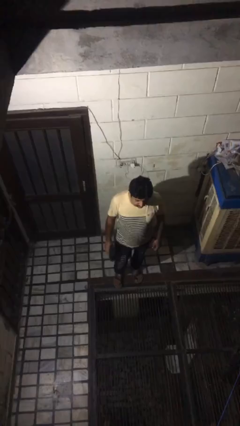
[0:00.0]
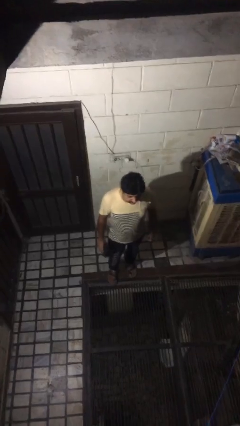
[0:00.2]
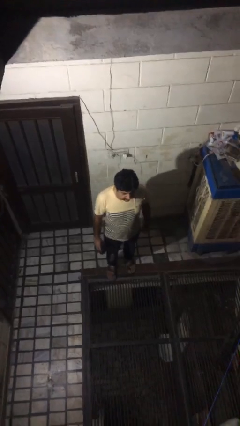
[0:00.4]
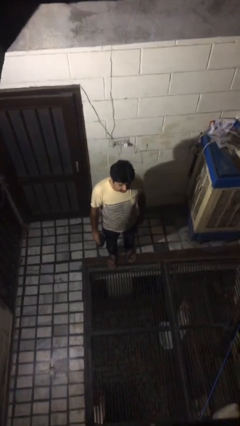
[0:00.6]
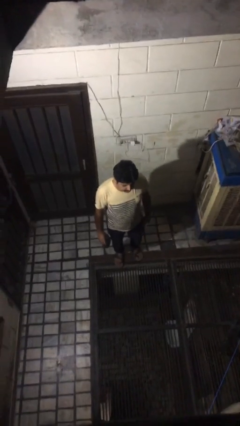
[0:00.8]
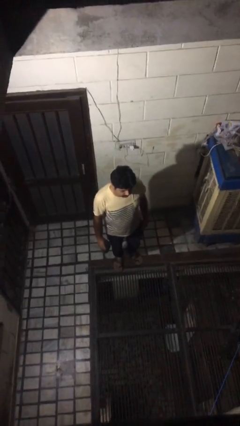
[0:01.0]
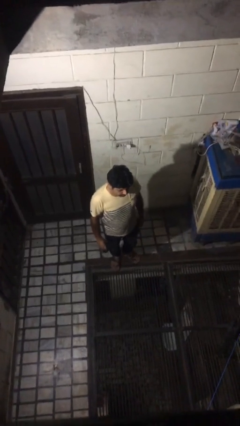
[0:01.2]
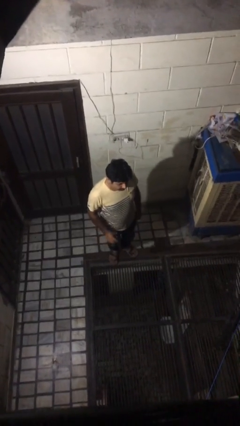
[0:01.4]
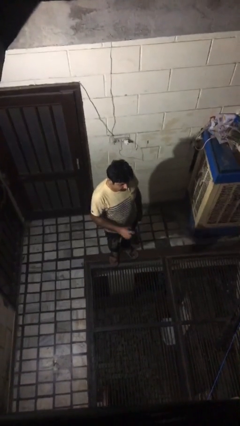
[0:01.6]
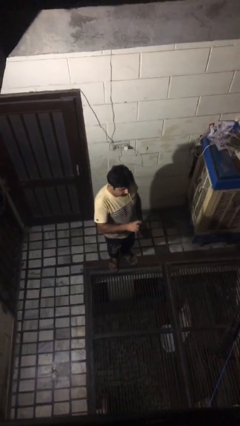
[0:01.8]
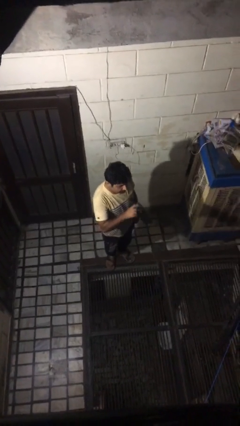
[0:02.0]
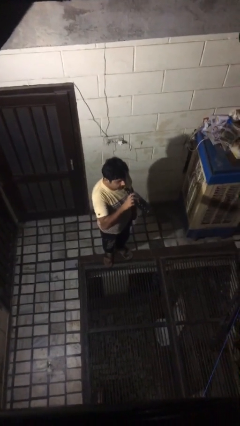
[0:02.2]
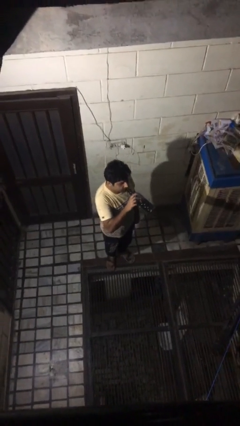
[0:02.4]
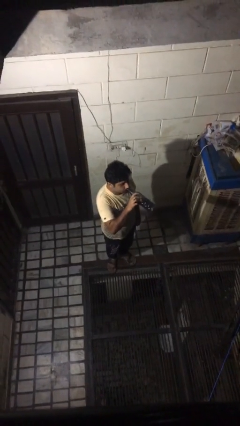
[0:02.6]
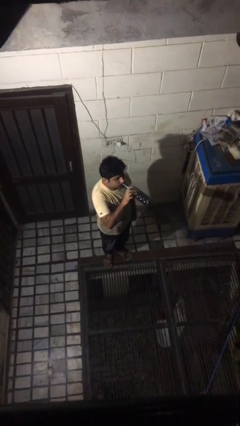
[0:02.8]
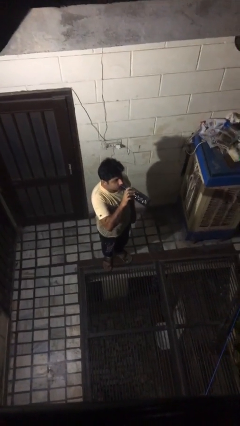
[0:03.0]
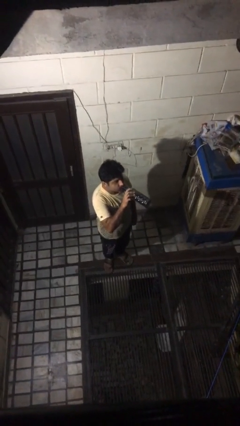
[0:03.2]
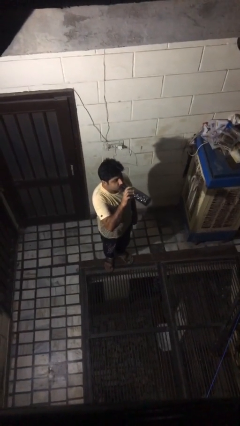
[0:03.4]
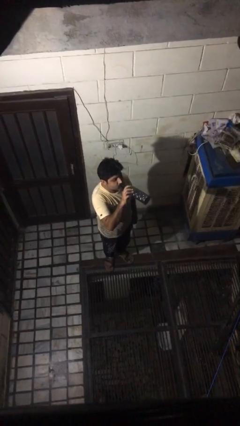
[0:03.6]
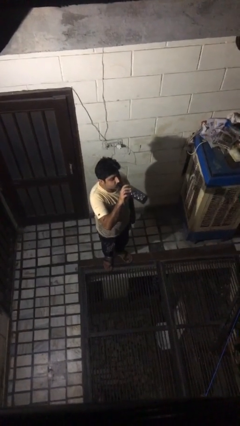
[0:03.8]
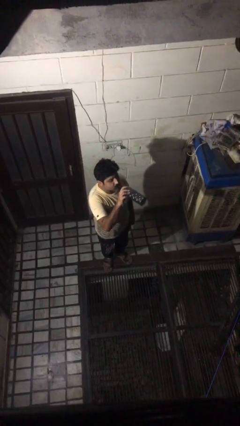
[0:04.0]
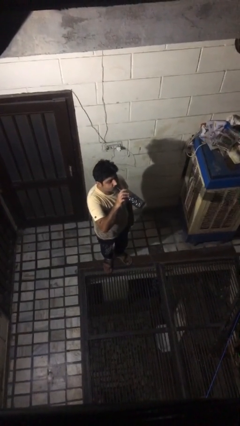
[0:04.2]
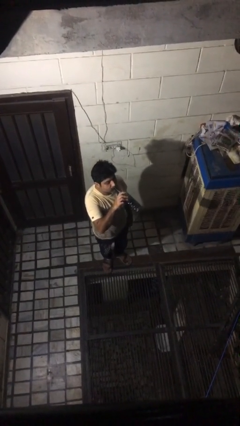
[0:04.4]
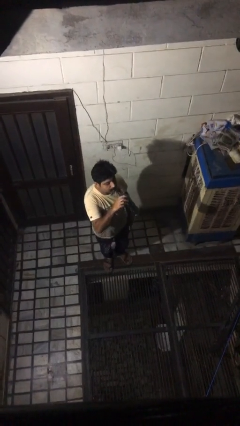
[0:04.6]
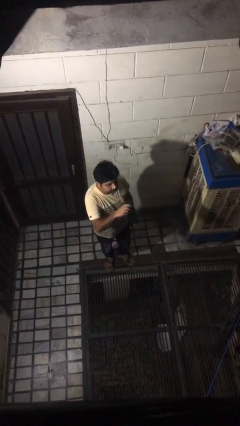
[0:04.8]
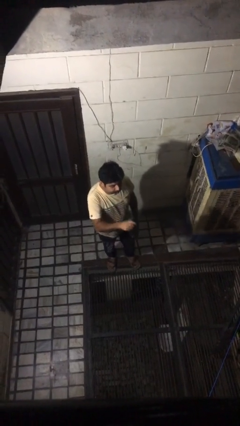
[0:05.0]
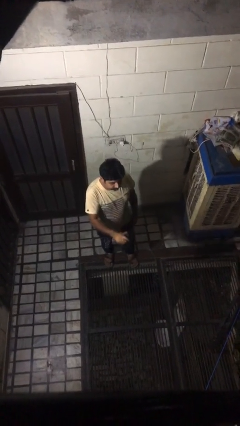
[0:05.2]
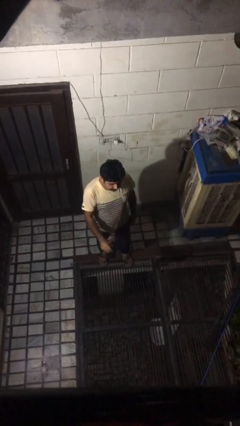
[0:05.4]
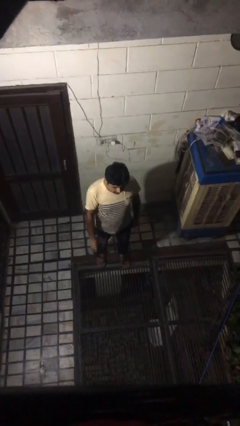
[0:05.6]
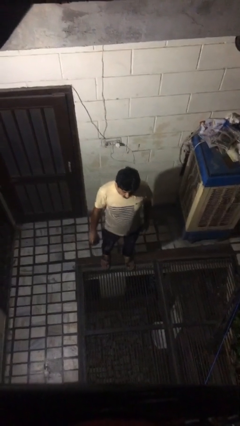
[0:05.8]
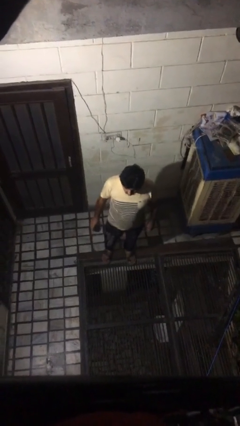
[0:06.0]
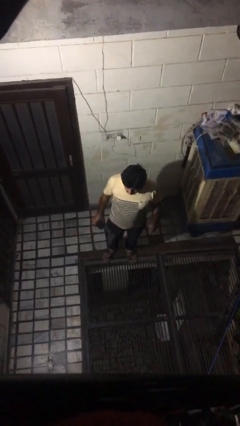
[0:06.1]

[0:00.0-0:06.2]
person drinks from bottle

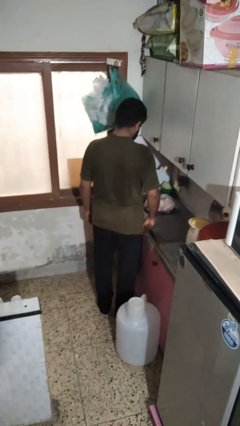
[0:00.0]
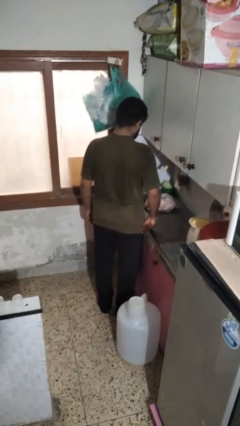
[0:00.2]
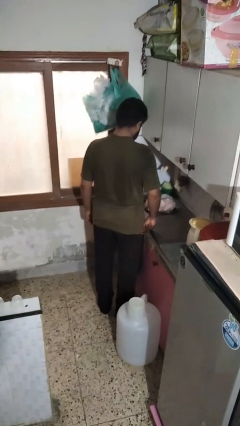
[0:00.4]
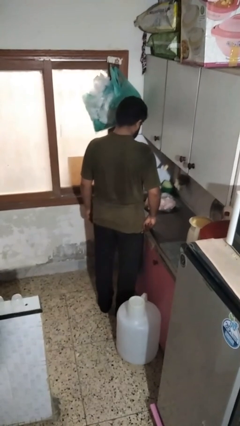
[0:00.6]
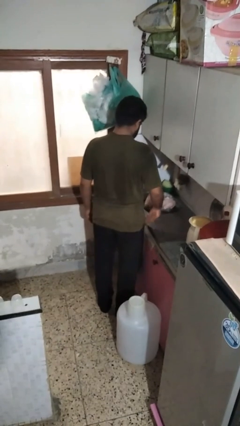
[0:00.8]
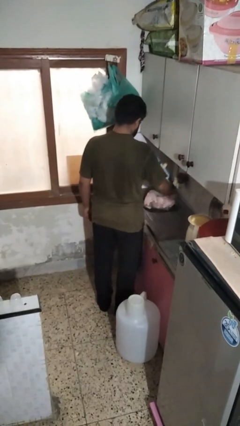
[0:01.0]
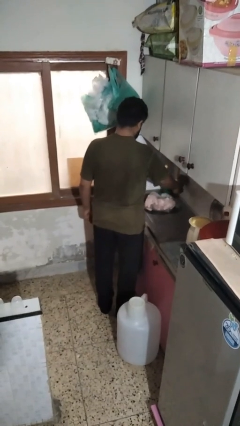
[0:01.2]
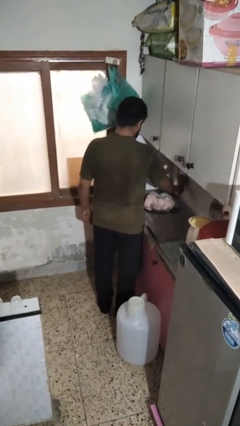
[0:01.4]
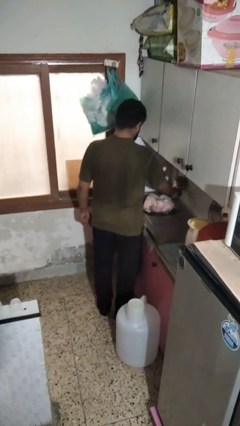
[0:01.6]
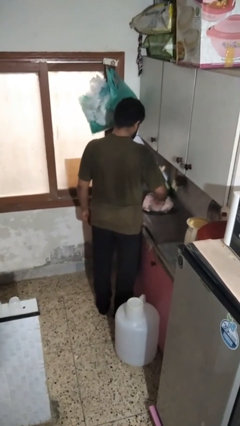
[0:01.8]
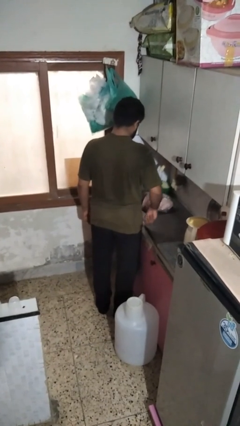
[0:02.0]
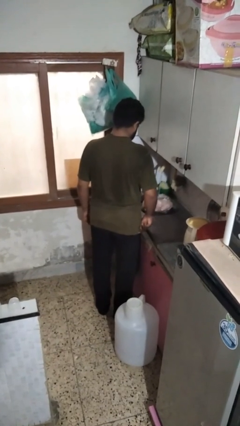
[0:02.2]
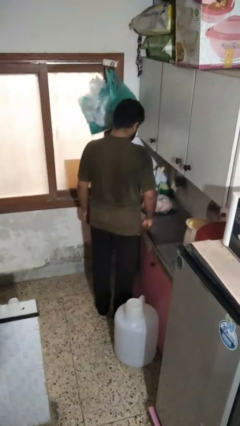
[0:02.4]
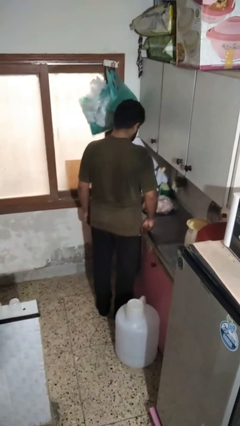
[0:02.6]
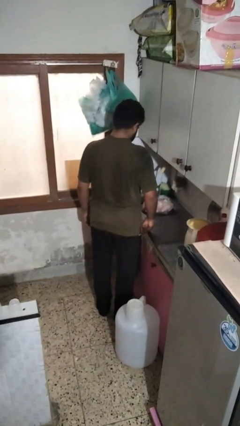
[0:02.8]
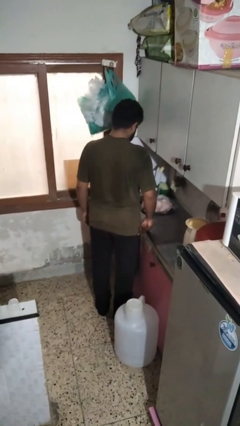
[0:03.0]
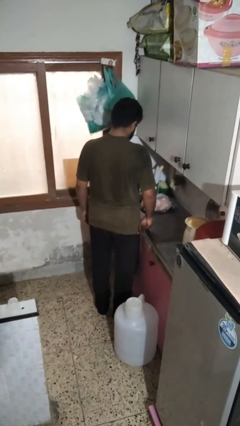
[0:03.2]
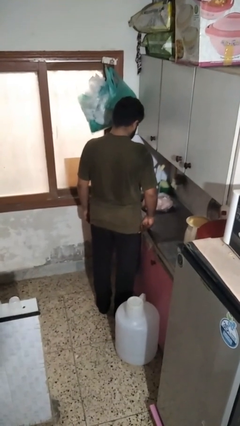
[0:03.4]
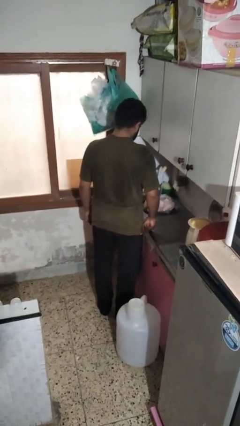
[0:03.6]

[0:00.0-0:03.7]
person turns on faucet

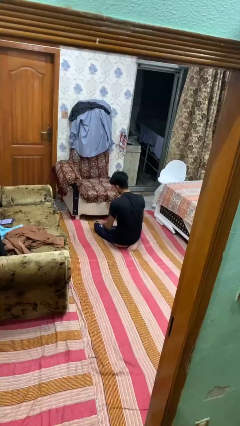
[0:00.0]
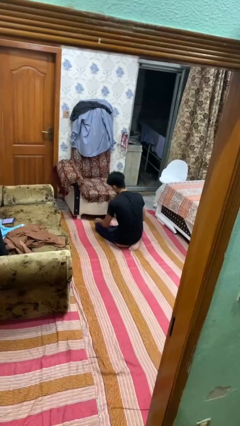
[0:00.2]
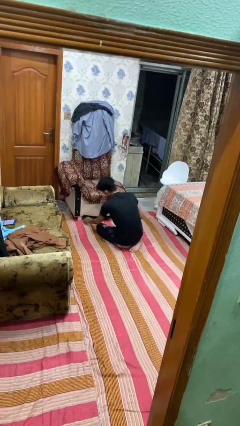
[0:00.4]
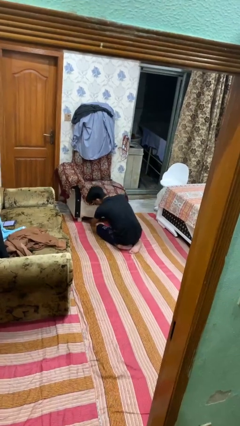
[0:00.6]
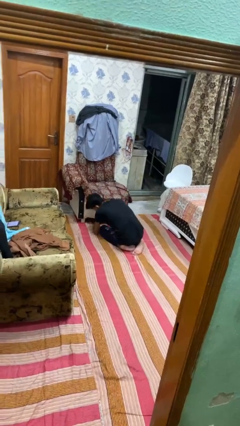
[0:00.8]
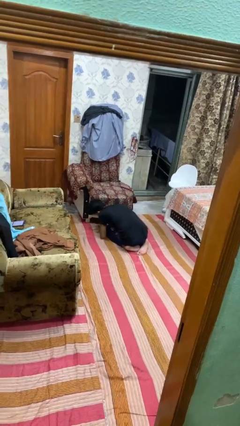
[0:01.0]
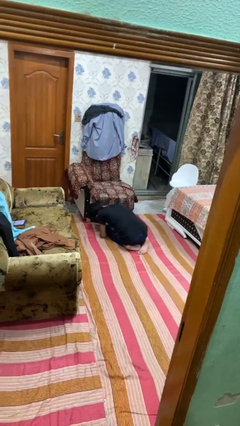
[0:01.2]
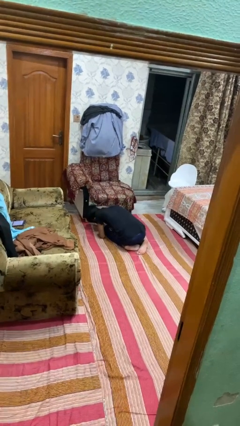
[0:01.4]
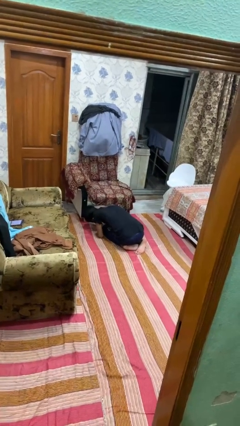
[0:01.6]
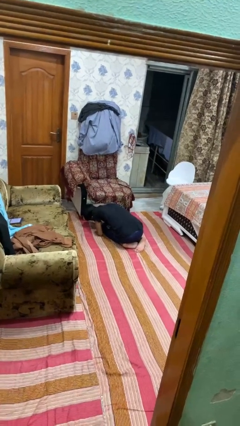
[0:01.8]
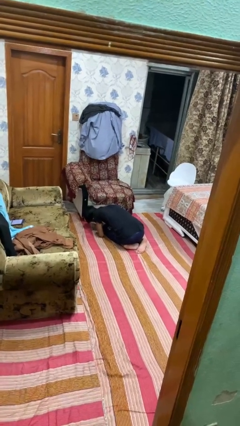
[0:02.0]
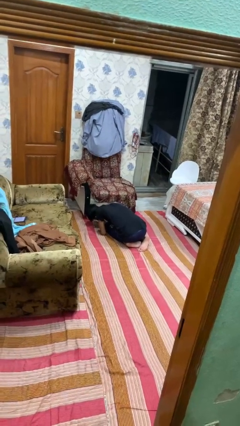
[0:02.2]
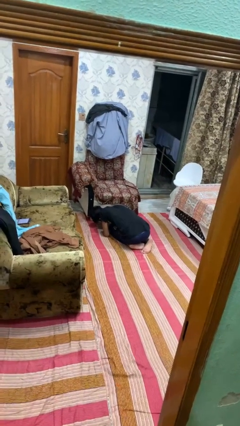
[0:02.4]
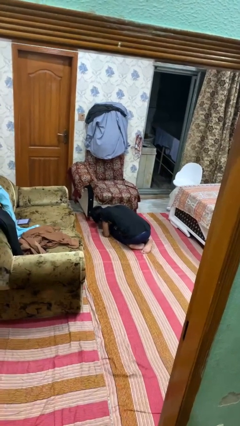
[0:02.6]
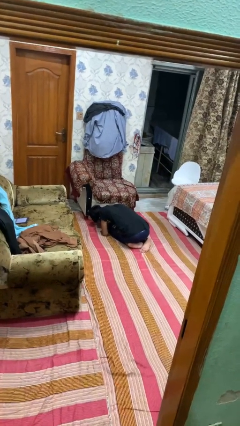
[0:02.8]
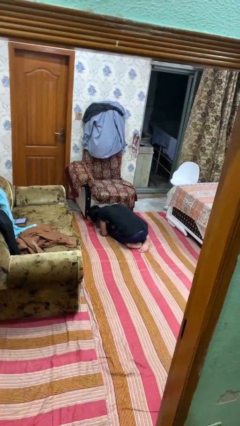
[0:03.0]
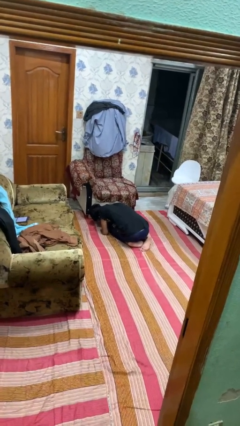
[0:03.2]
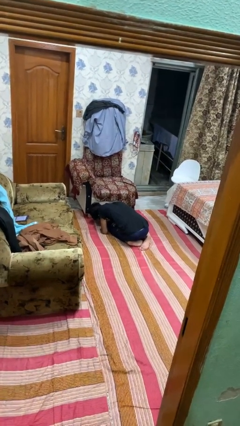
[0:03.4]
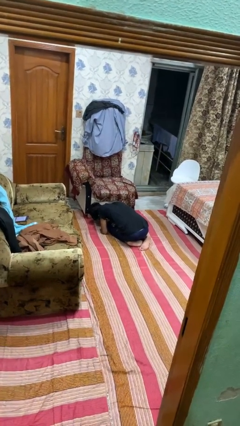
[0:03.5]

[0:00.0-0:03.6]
person searches under couch

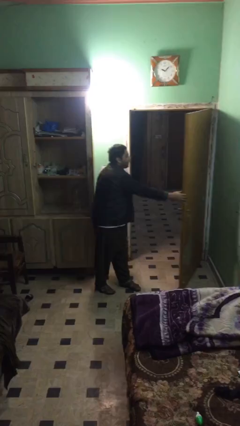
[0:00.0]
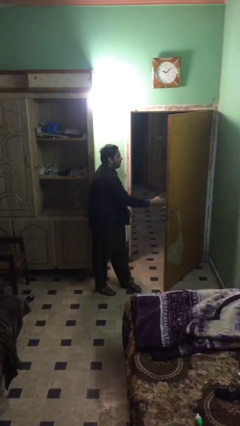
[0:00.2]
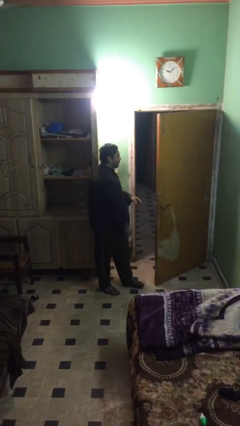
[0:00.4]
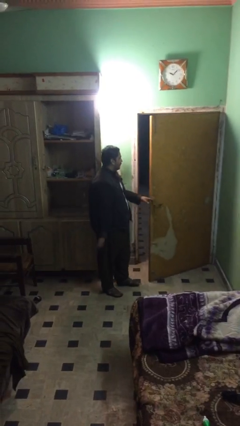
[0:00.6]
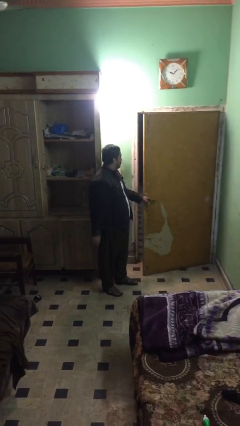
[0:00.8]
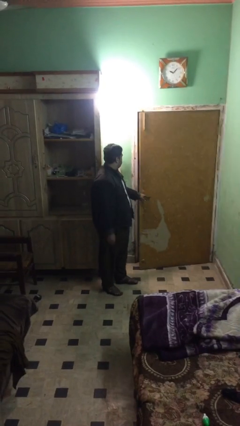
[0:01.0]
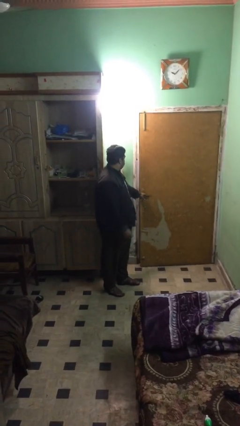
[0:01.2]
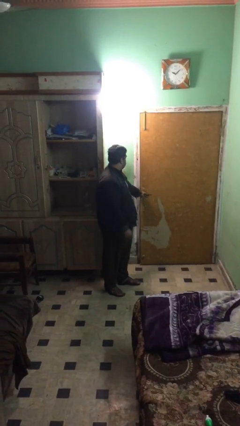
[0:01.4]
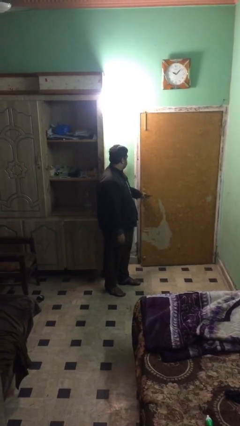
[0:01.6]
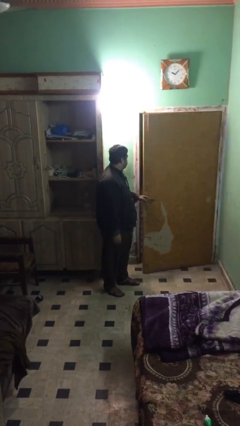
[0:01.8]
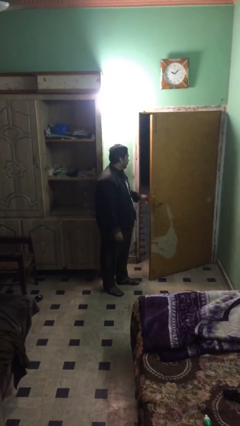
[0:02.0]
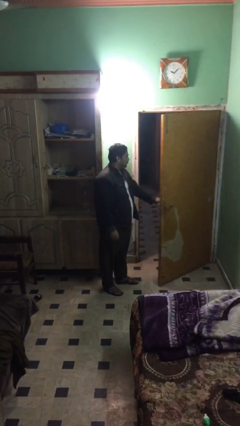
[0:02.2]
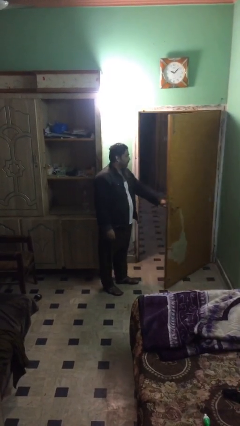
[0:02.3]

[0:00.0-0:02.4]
person opens facility door

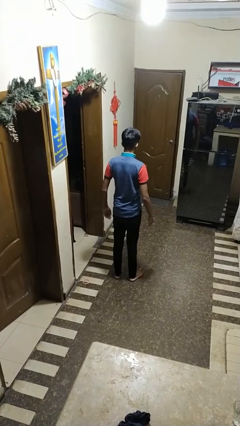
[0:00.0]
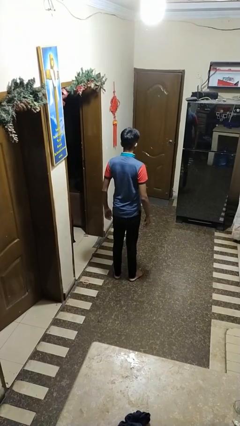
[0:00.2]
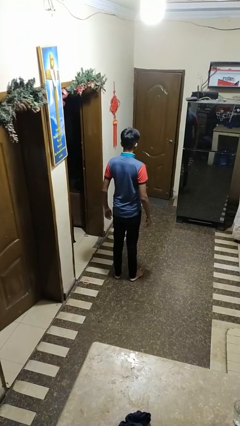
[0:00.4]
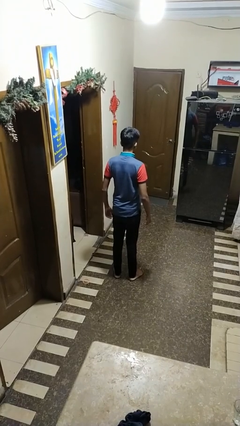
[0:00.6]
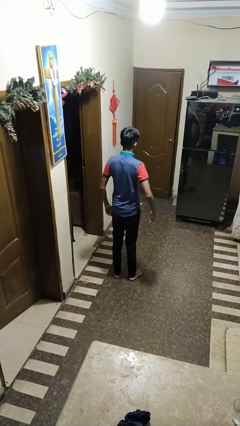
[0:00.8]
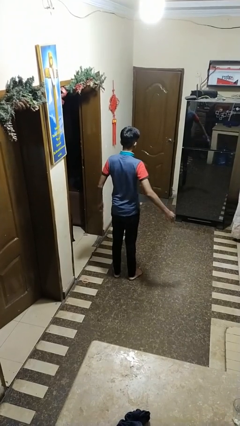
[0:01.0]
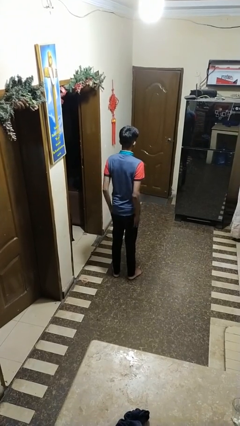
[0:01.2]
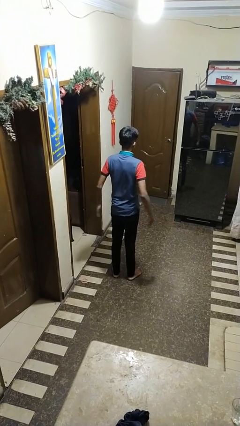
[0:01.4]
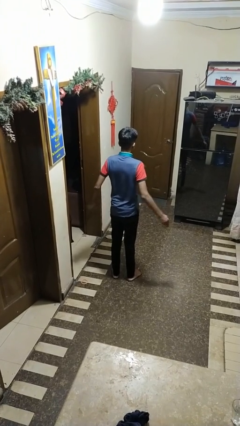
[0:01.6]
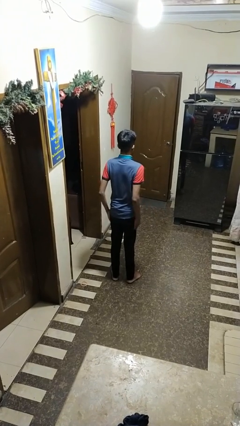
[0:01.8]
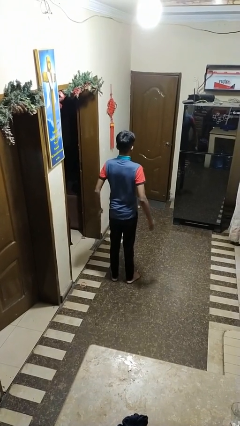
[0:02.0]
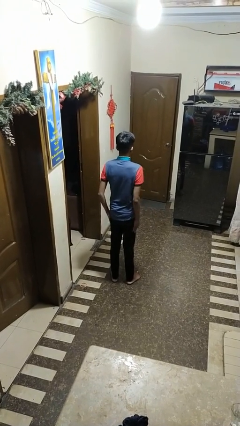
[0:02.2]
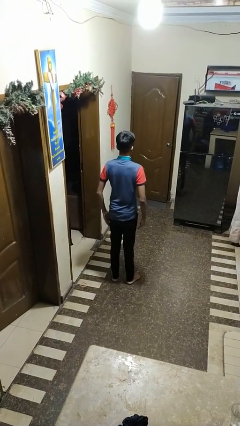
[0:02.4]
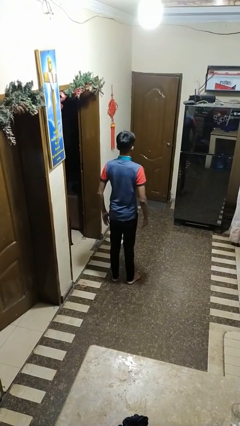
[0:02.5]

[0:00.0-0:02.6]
person slaps hands on thighs
